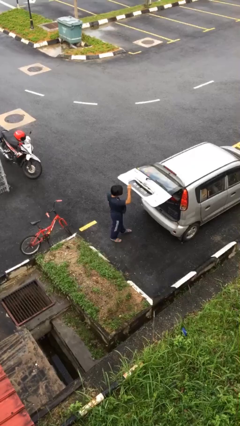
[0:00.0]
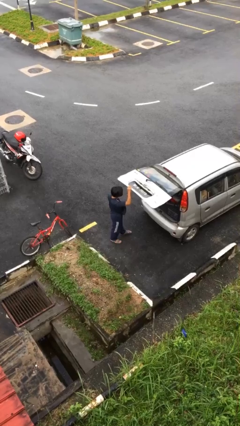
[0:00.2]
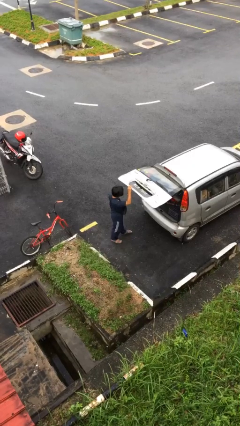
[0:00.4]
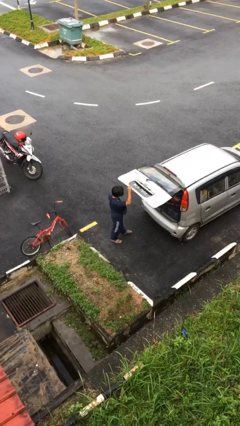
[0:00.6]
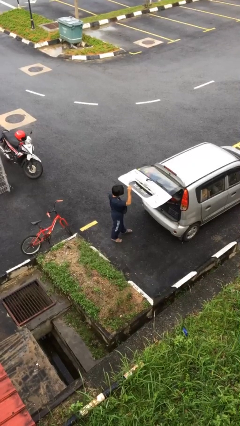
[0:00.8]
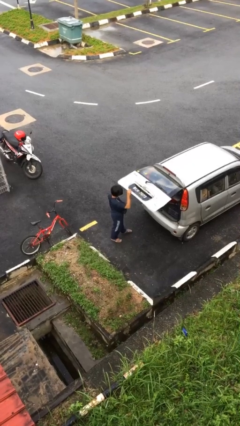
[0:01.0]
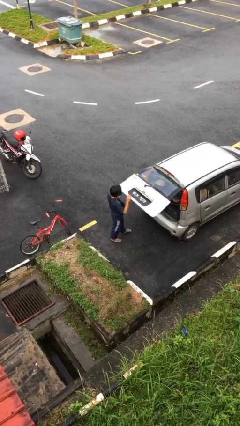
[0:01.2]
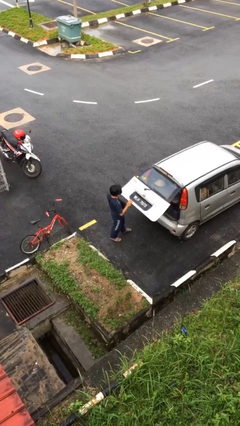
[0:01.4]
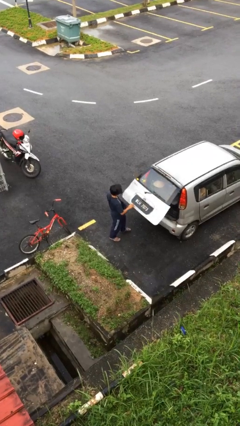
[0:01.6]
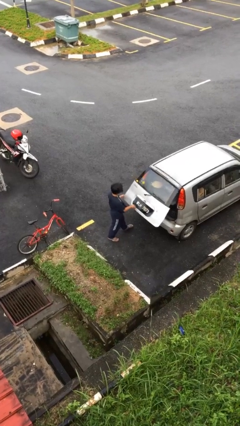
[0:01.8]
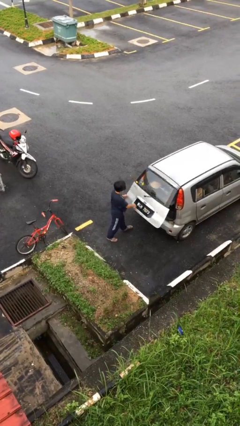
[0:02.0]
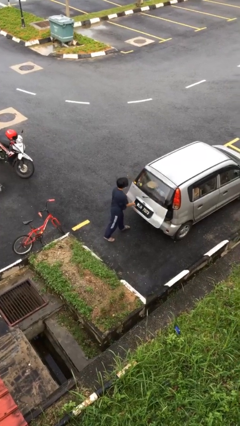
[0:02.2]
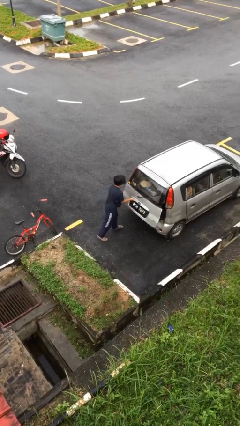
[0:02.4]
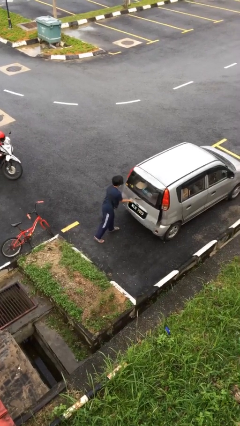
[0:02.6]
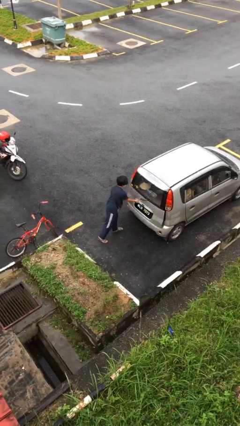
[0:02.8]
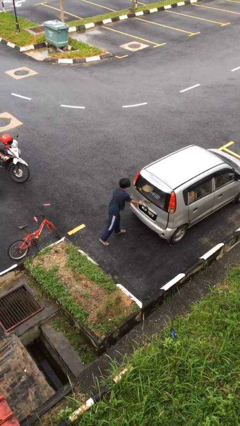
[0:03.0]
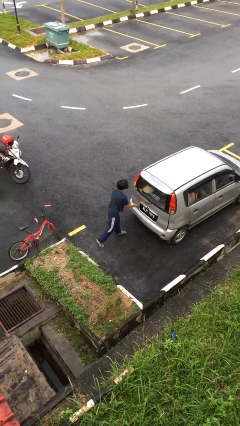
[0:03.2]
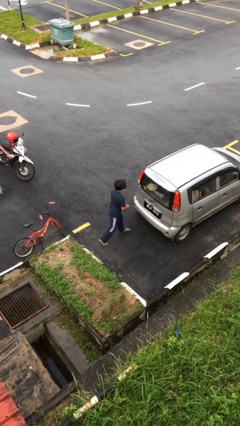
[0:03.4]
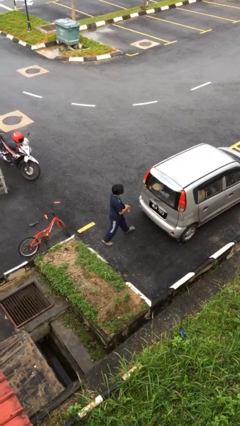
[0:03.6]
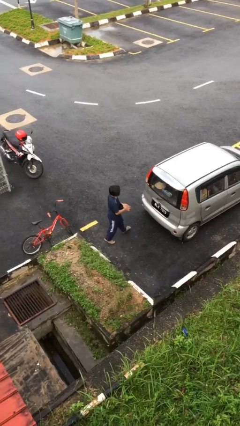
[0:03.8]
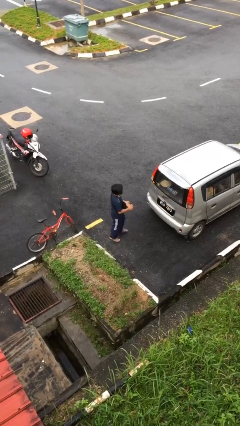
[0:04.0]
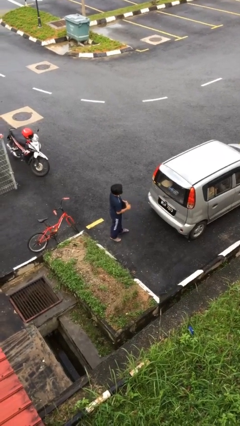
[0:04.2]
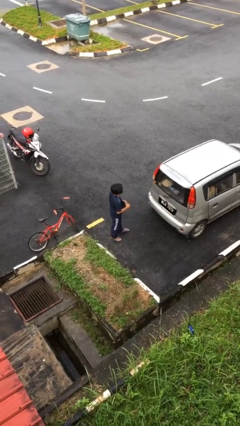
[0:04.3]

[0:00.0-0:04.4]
person closes car trunk

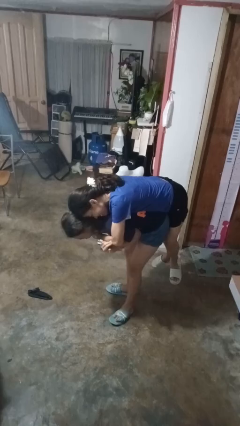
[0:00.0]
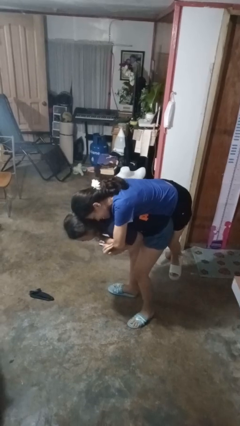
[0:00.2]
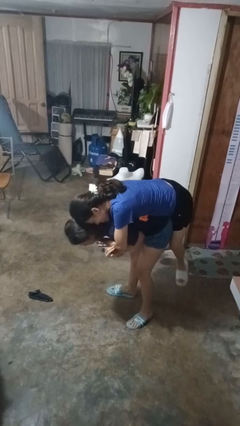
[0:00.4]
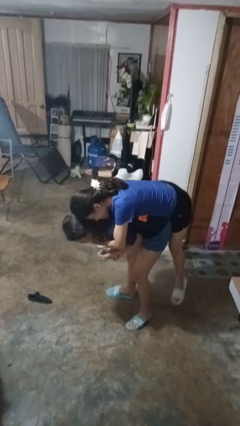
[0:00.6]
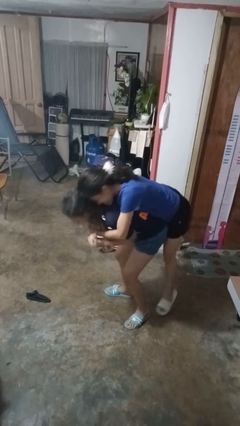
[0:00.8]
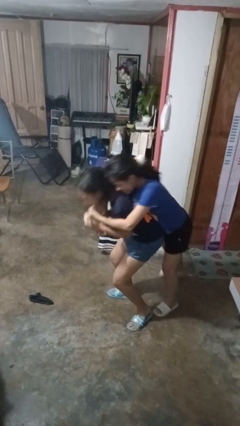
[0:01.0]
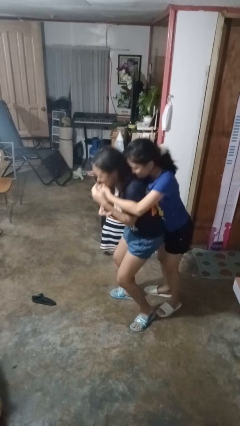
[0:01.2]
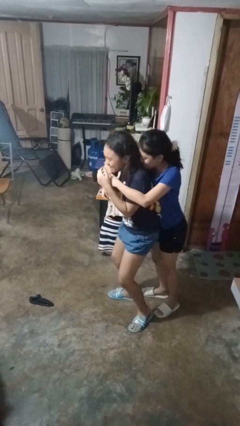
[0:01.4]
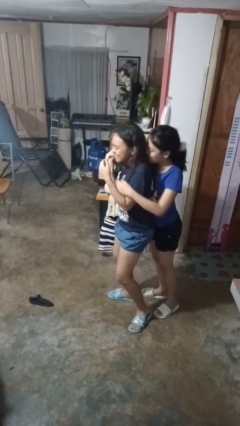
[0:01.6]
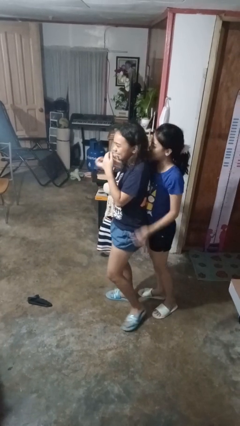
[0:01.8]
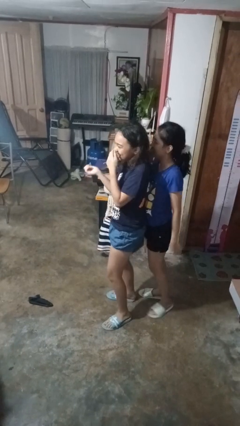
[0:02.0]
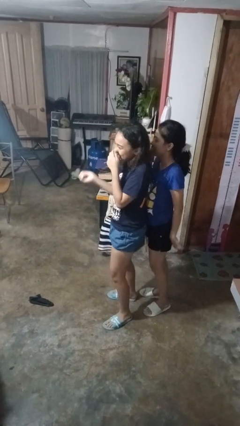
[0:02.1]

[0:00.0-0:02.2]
person puts down person

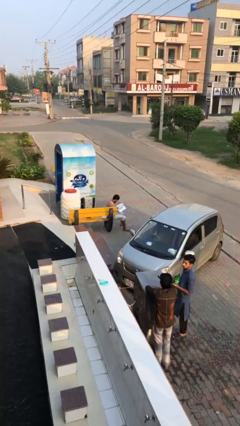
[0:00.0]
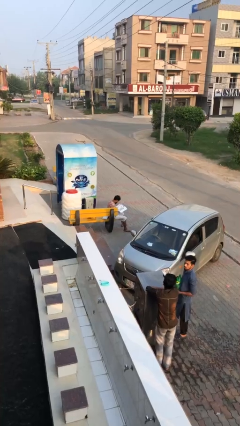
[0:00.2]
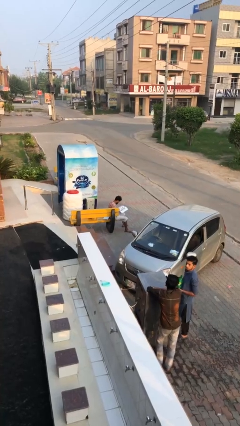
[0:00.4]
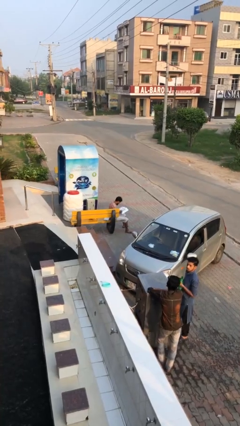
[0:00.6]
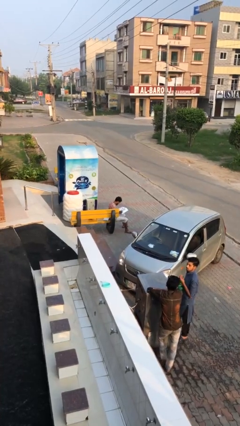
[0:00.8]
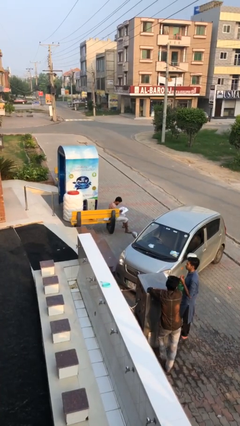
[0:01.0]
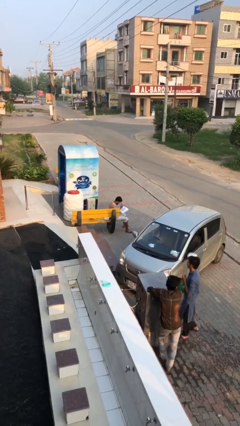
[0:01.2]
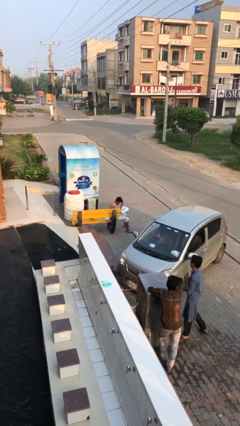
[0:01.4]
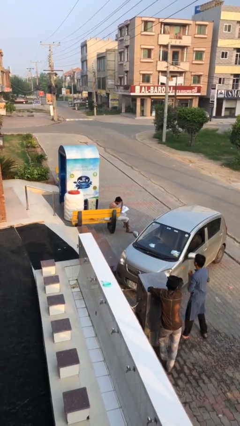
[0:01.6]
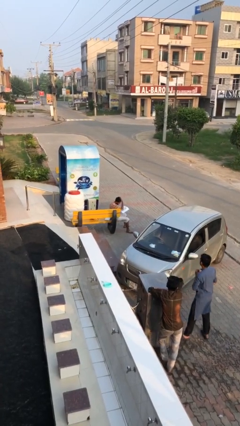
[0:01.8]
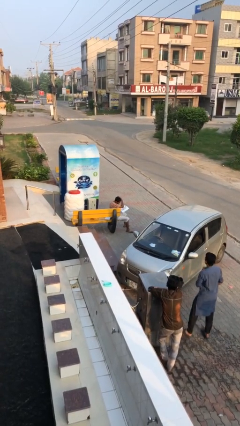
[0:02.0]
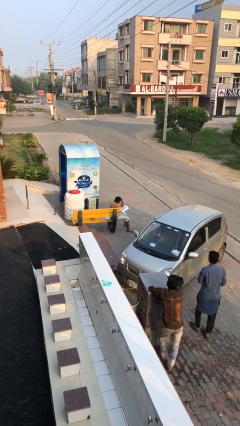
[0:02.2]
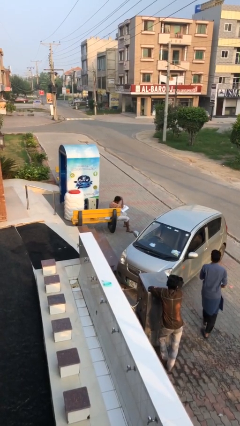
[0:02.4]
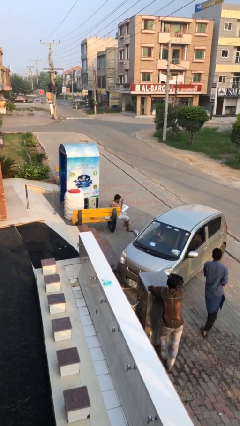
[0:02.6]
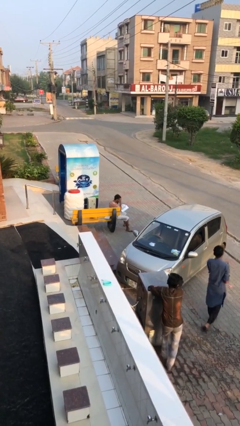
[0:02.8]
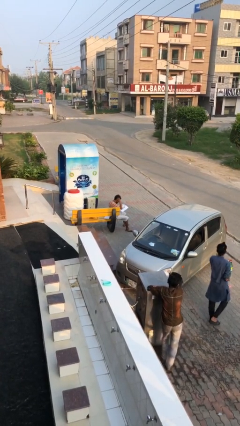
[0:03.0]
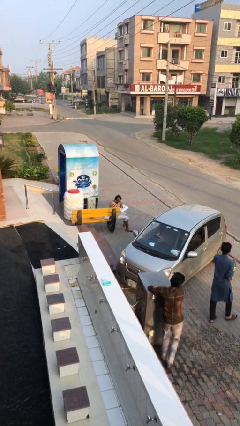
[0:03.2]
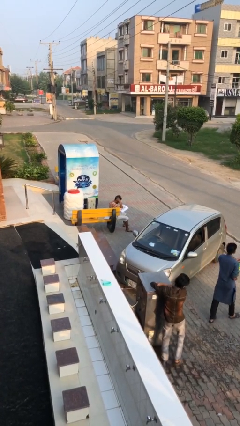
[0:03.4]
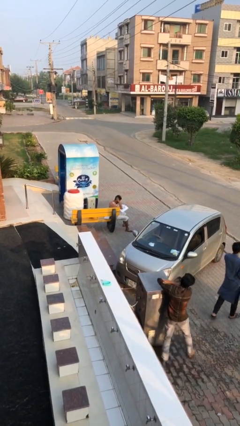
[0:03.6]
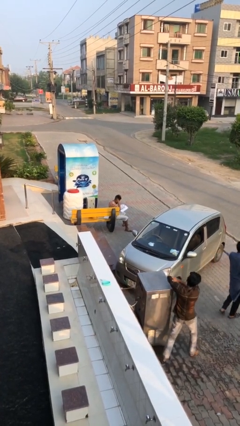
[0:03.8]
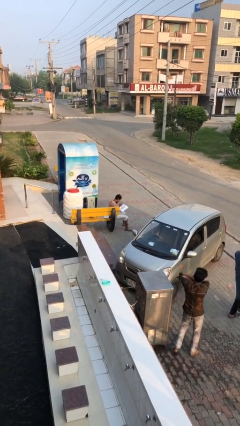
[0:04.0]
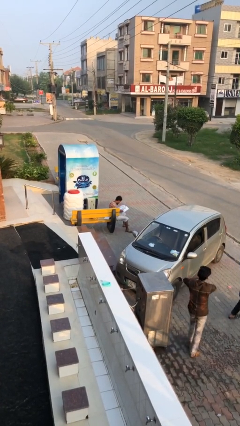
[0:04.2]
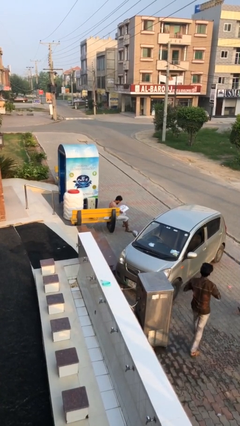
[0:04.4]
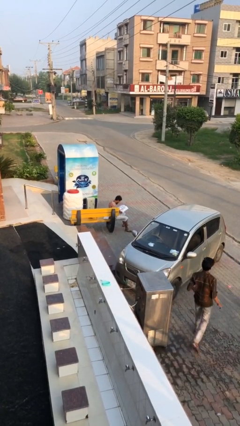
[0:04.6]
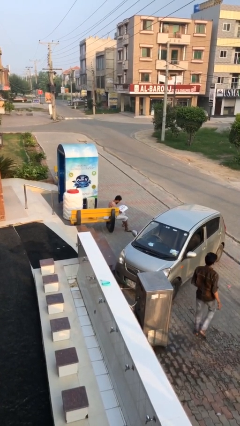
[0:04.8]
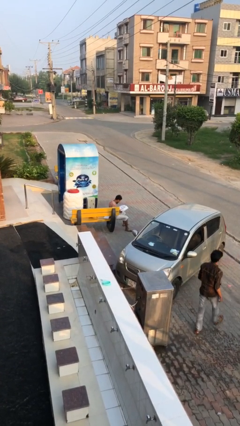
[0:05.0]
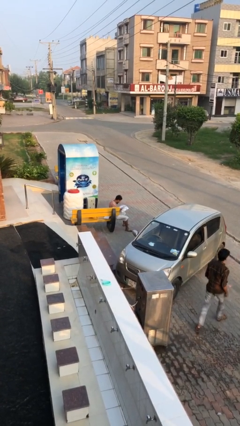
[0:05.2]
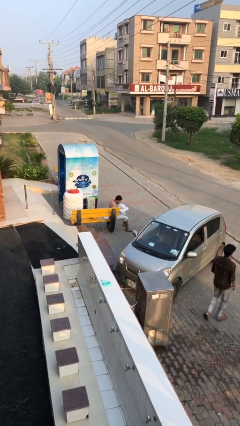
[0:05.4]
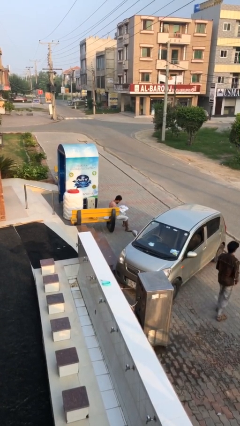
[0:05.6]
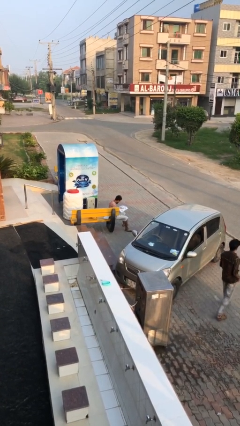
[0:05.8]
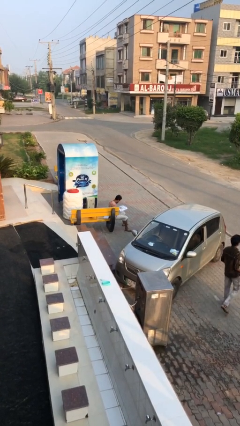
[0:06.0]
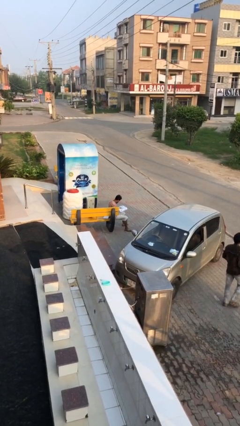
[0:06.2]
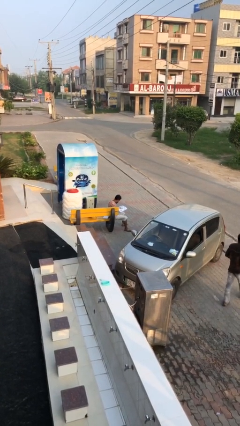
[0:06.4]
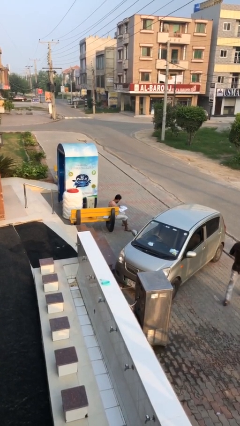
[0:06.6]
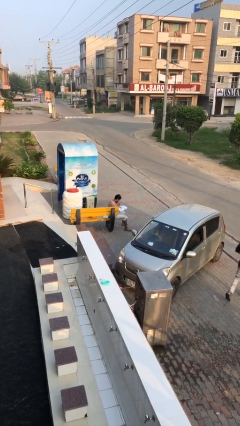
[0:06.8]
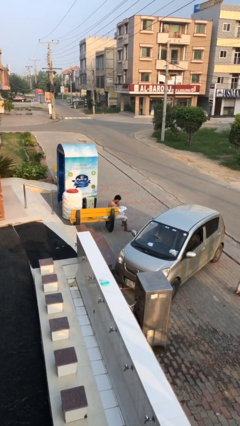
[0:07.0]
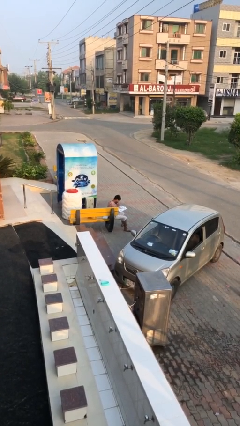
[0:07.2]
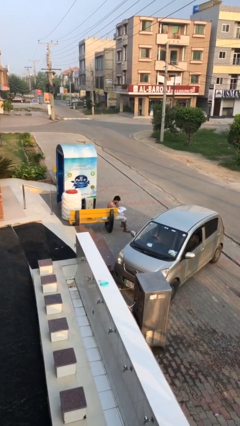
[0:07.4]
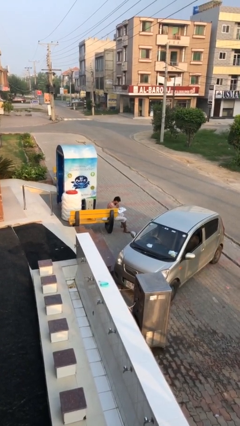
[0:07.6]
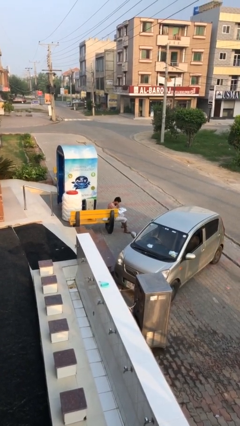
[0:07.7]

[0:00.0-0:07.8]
person reads document

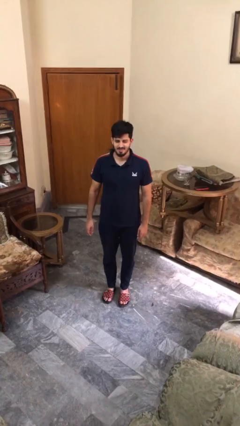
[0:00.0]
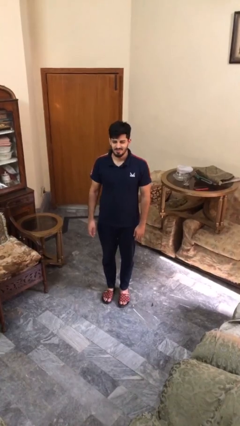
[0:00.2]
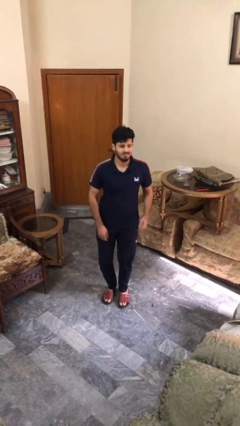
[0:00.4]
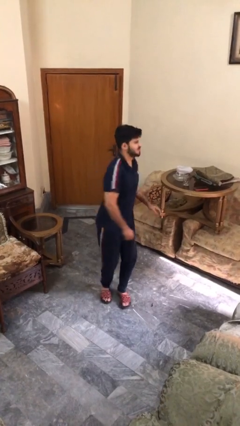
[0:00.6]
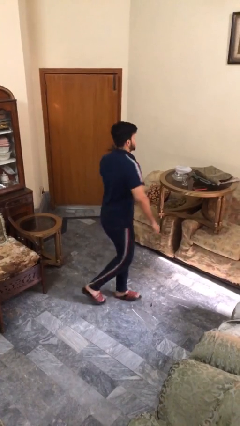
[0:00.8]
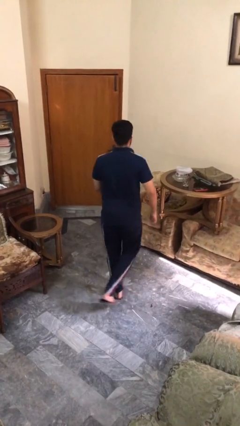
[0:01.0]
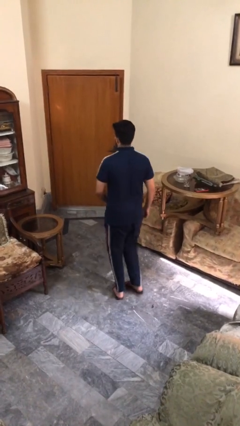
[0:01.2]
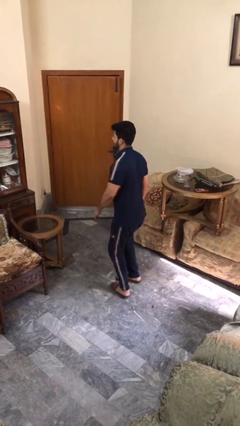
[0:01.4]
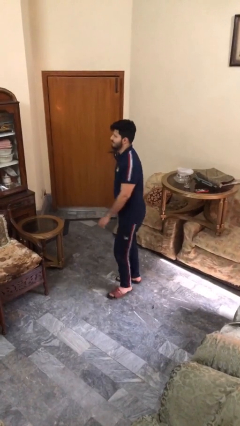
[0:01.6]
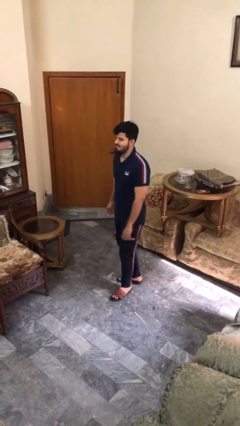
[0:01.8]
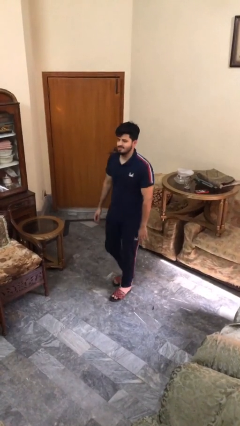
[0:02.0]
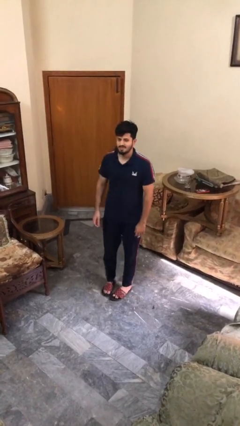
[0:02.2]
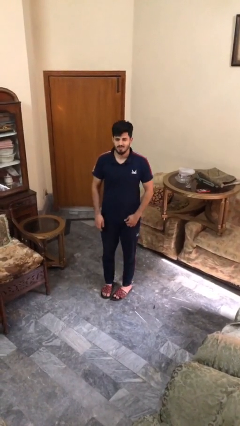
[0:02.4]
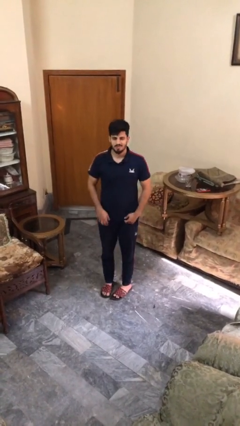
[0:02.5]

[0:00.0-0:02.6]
person twirls

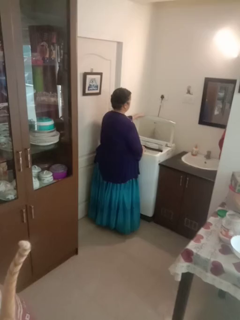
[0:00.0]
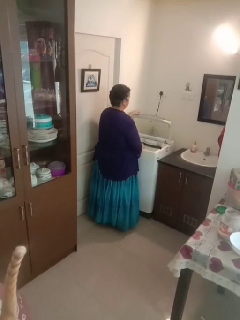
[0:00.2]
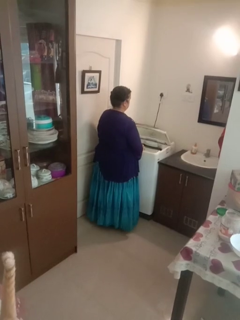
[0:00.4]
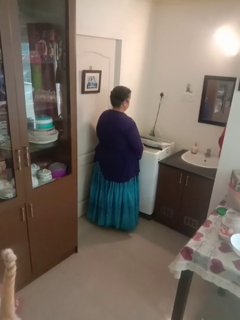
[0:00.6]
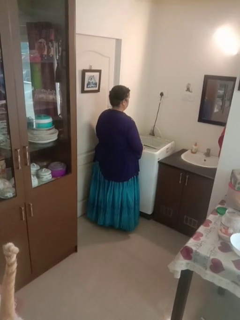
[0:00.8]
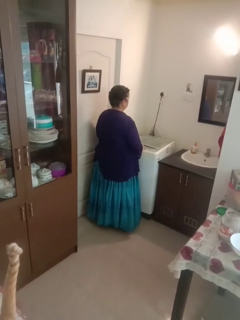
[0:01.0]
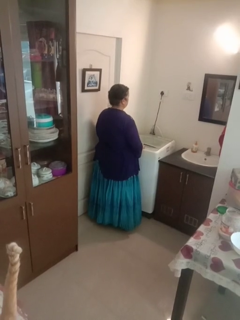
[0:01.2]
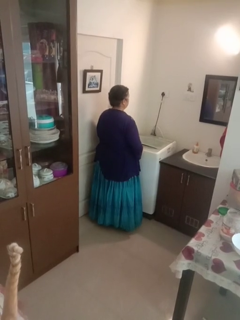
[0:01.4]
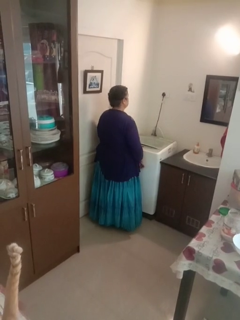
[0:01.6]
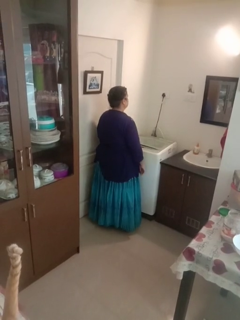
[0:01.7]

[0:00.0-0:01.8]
person closes clothes washer
